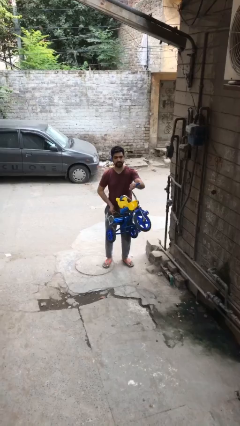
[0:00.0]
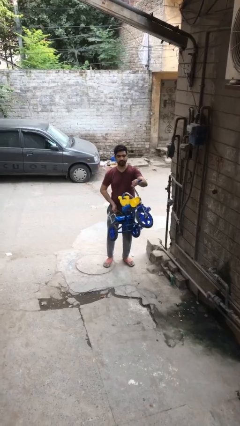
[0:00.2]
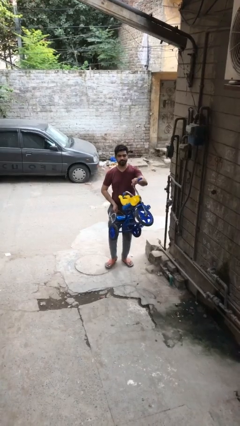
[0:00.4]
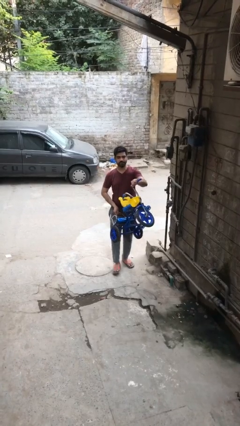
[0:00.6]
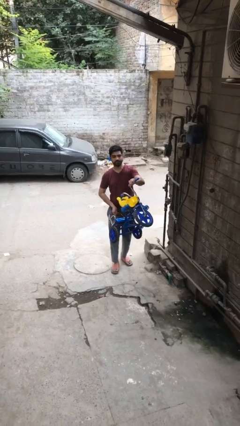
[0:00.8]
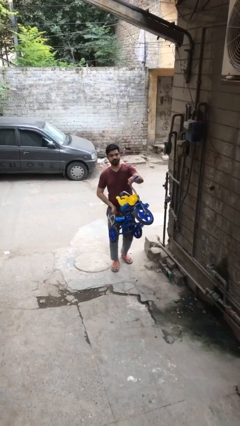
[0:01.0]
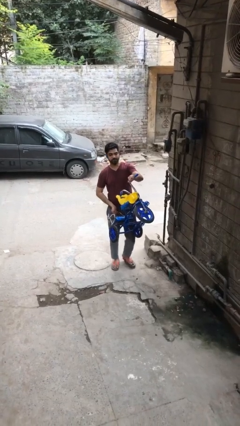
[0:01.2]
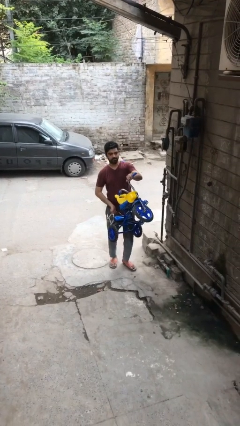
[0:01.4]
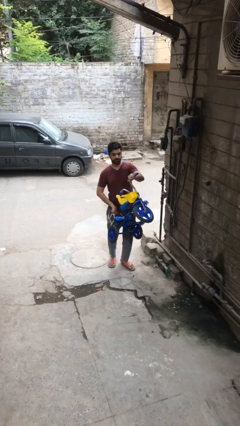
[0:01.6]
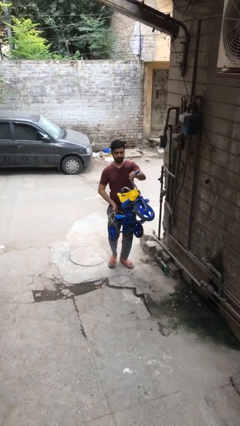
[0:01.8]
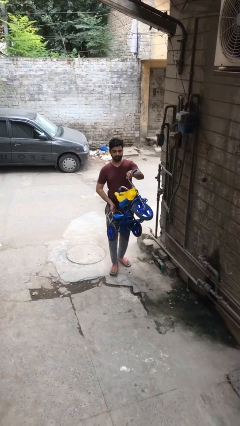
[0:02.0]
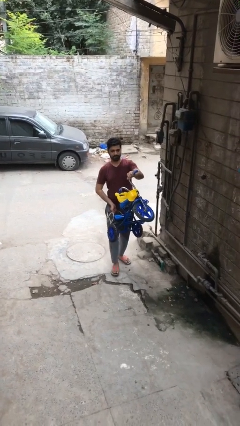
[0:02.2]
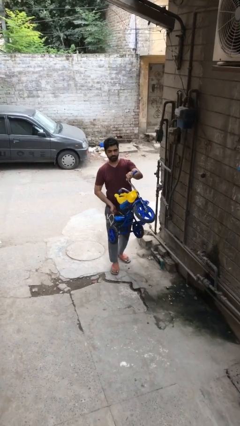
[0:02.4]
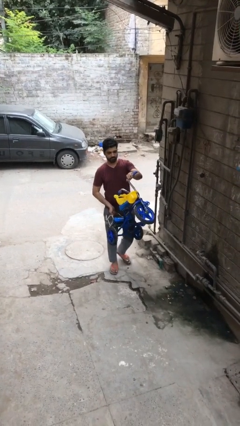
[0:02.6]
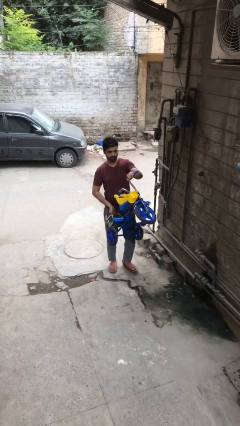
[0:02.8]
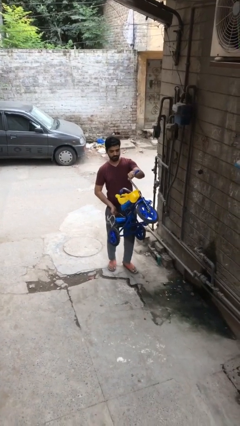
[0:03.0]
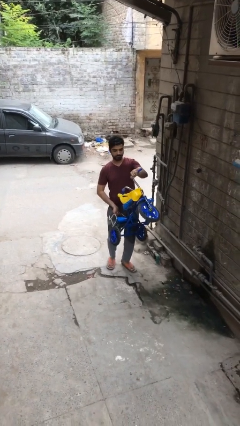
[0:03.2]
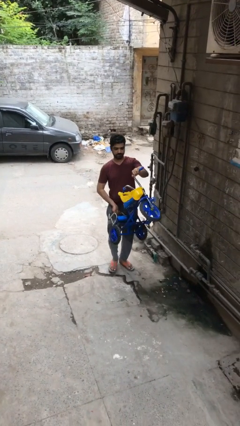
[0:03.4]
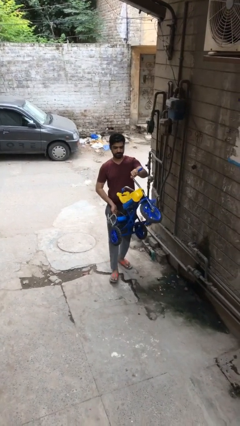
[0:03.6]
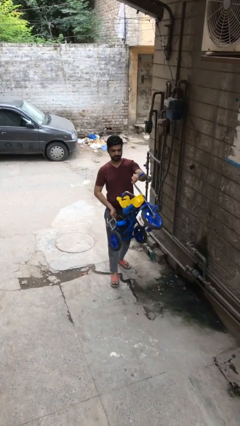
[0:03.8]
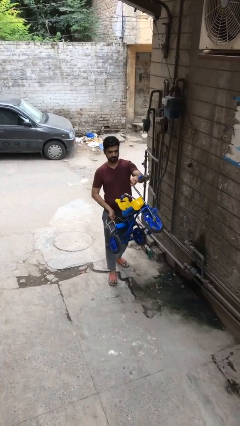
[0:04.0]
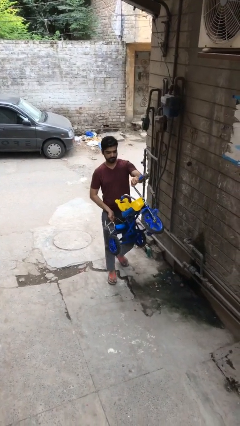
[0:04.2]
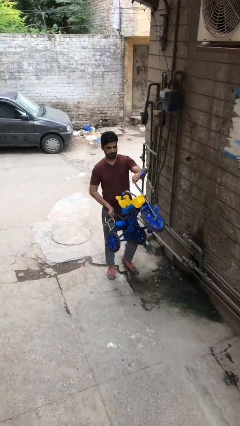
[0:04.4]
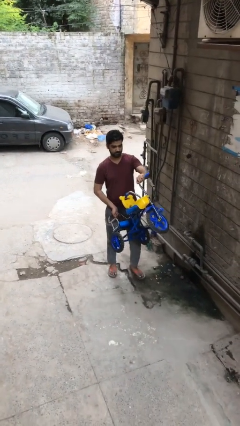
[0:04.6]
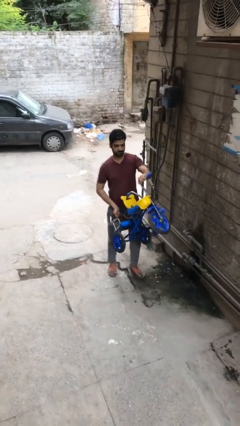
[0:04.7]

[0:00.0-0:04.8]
person carries heavy object

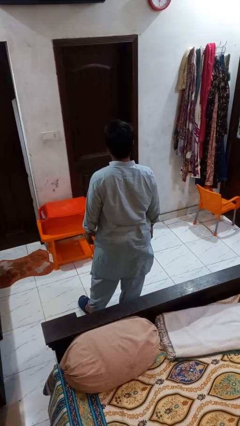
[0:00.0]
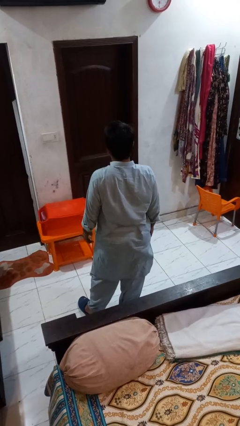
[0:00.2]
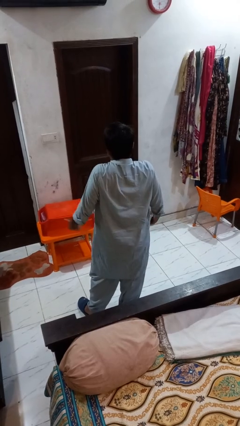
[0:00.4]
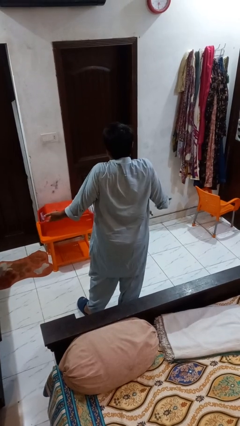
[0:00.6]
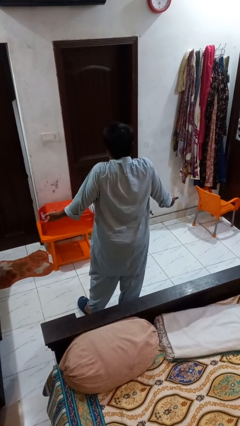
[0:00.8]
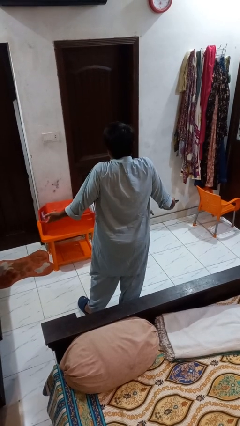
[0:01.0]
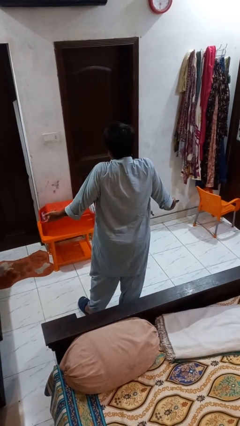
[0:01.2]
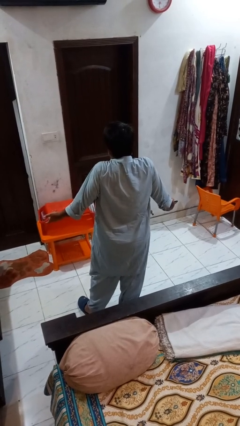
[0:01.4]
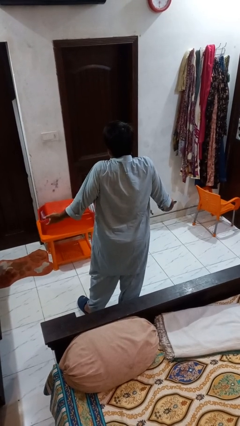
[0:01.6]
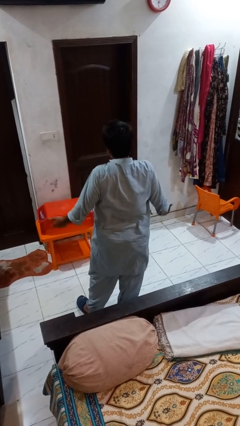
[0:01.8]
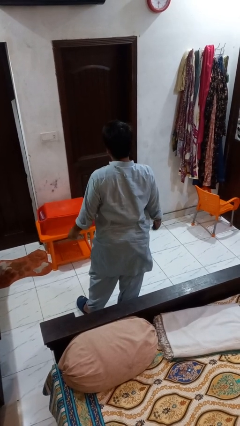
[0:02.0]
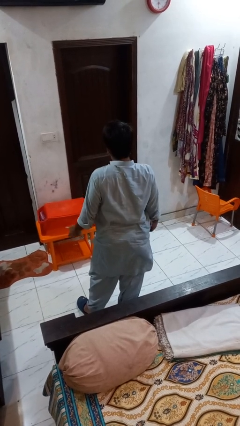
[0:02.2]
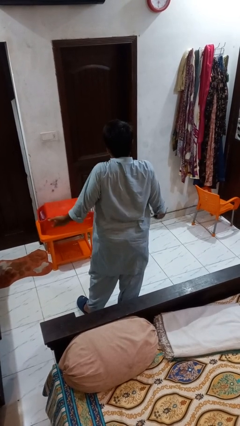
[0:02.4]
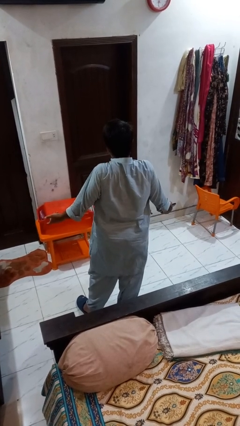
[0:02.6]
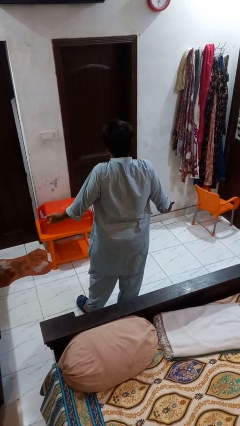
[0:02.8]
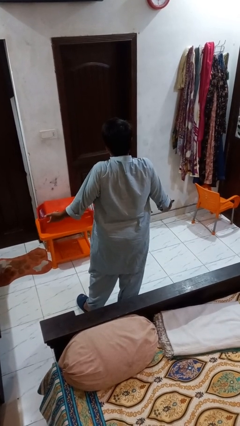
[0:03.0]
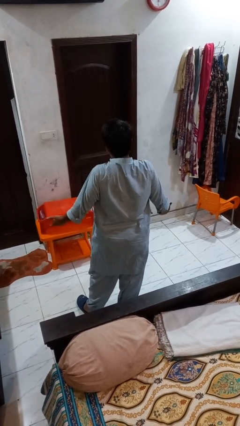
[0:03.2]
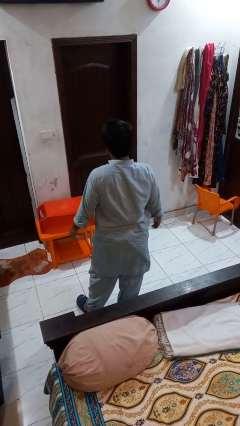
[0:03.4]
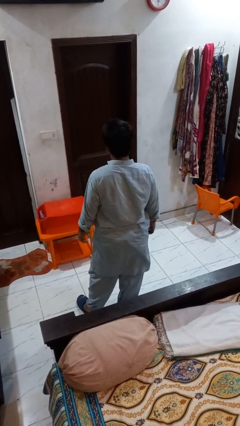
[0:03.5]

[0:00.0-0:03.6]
person shrugs

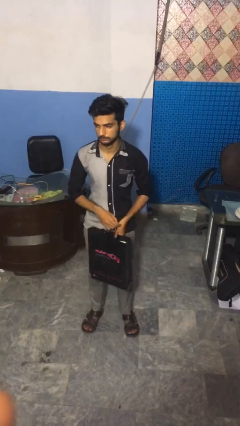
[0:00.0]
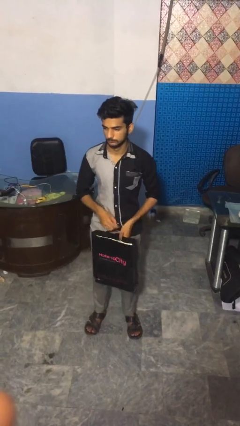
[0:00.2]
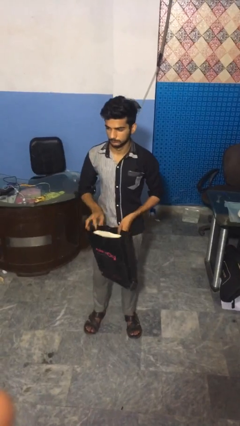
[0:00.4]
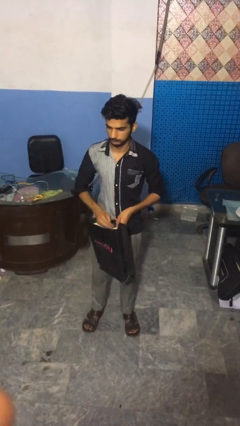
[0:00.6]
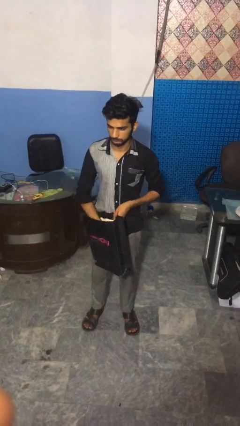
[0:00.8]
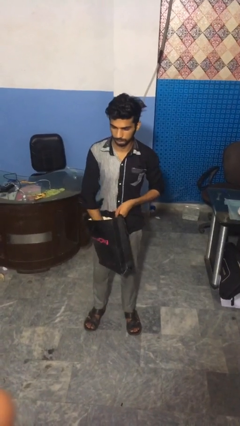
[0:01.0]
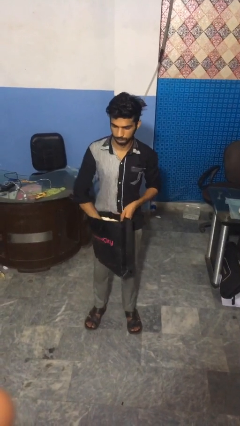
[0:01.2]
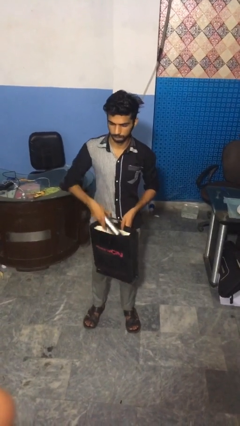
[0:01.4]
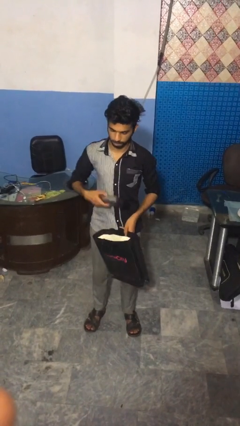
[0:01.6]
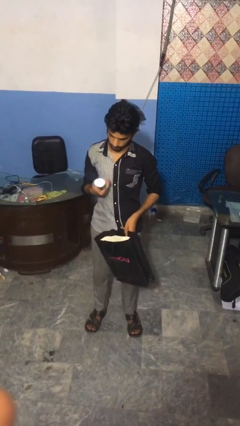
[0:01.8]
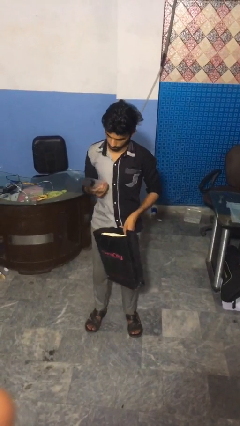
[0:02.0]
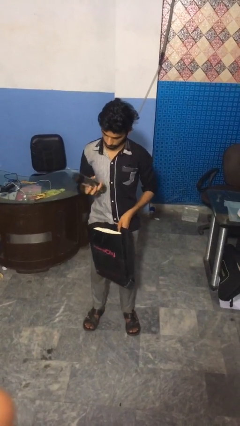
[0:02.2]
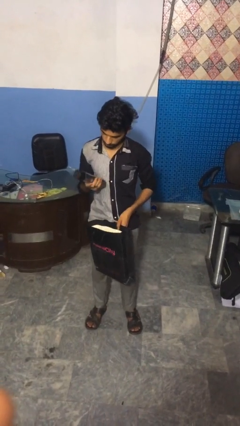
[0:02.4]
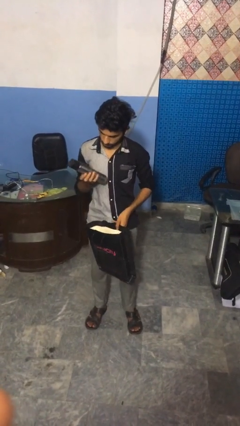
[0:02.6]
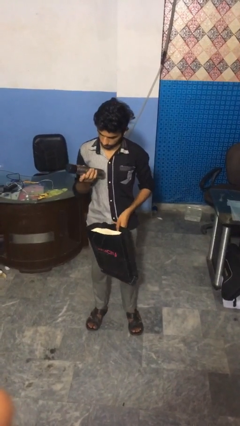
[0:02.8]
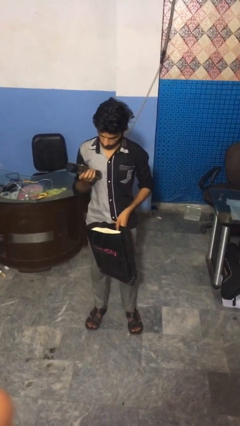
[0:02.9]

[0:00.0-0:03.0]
person takes object from bag

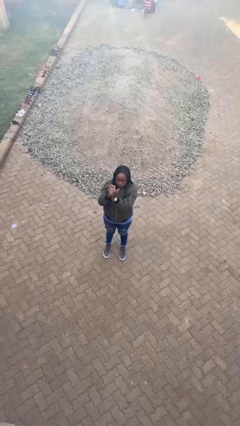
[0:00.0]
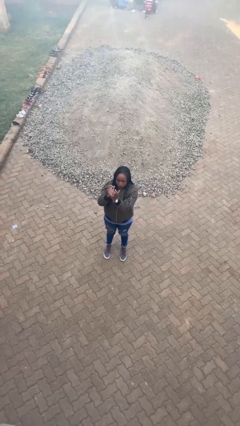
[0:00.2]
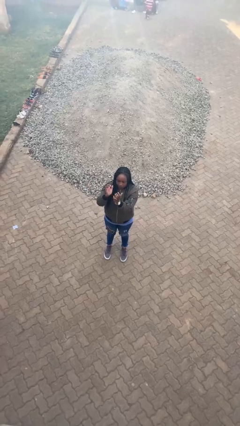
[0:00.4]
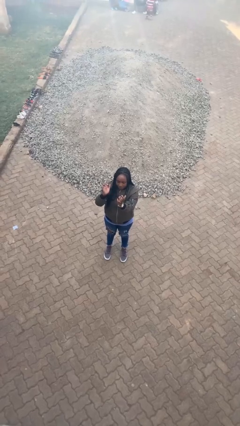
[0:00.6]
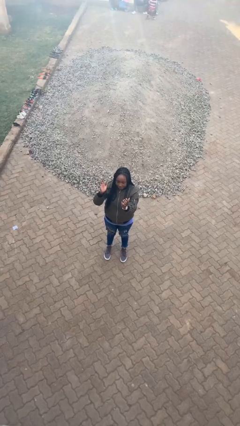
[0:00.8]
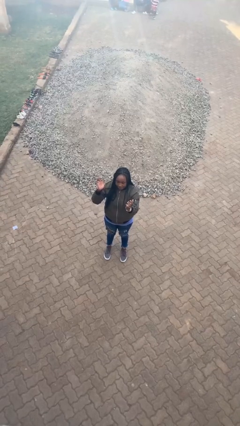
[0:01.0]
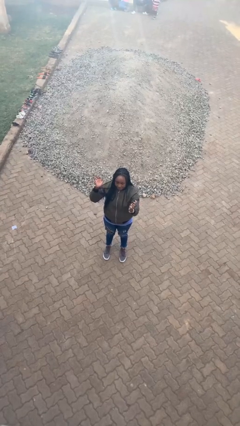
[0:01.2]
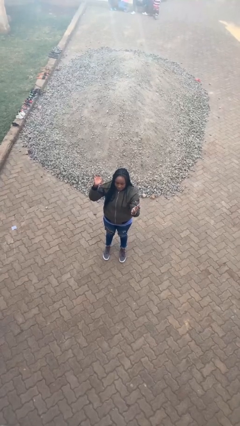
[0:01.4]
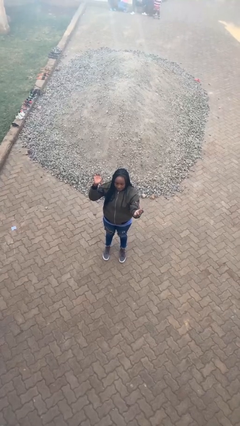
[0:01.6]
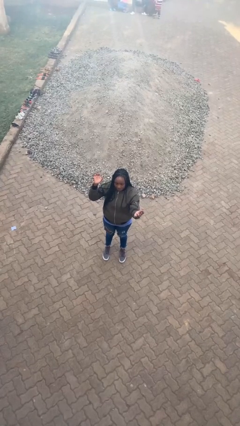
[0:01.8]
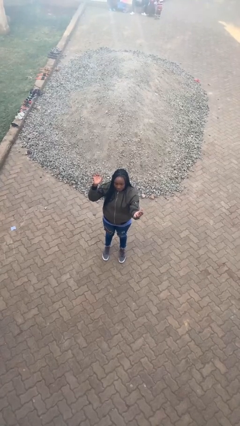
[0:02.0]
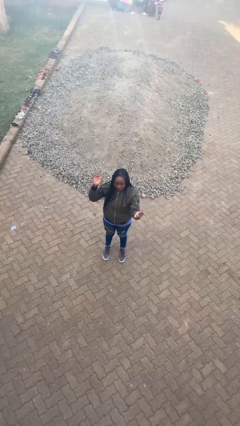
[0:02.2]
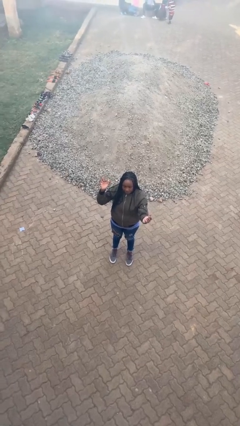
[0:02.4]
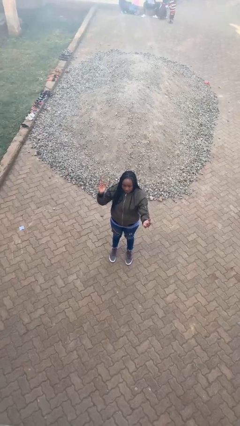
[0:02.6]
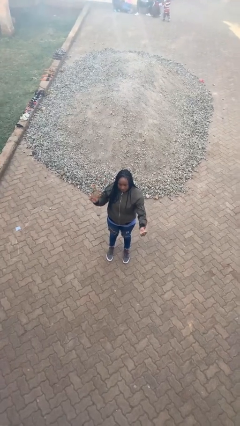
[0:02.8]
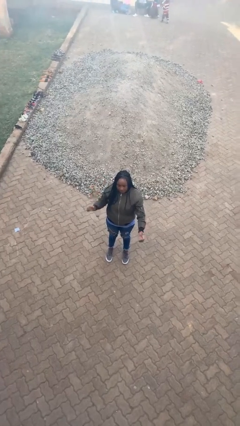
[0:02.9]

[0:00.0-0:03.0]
person gestures zoom out

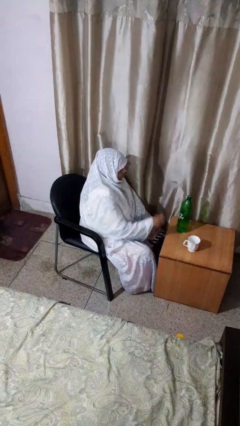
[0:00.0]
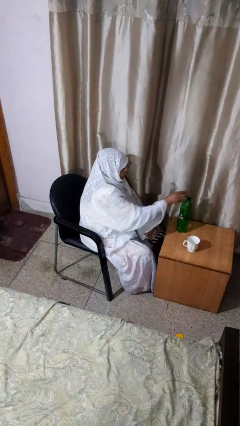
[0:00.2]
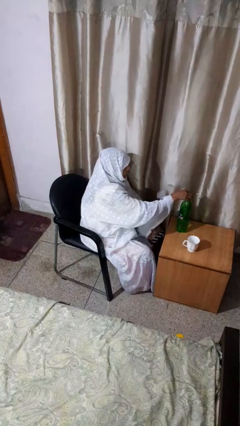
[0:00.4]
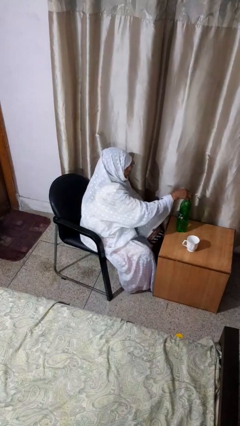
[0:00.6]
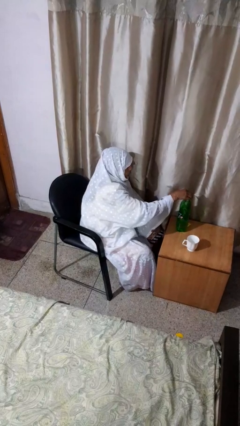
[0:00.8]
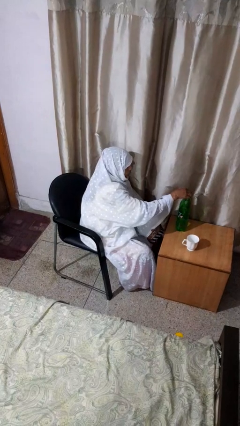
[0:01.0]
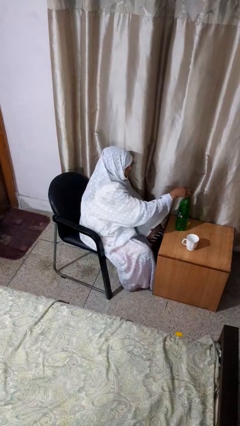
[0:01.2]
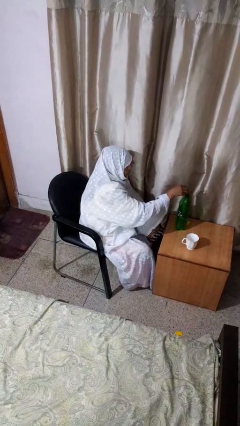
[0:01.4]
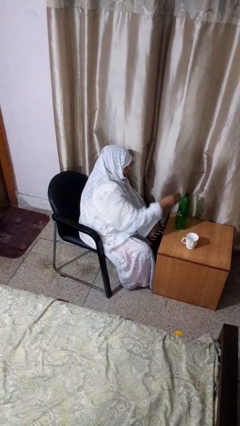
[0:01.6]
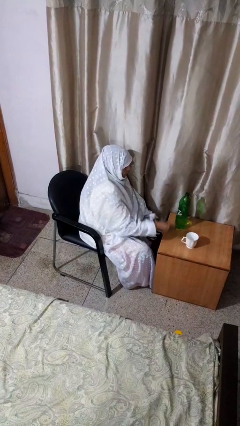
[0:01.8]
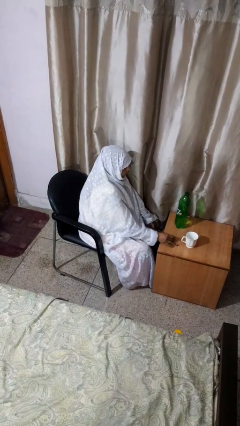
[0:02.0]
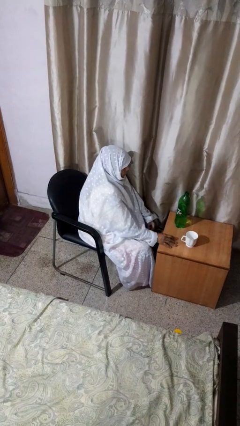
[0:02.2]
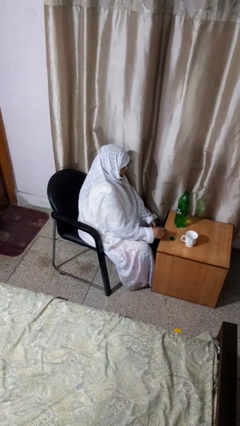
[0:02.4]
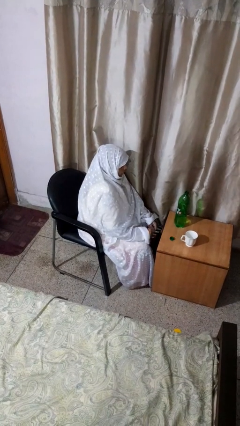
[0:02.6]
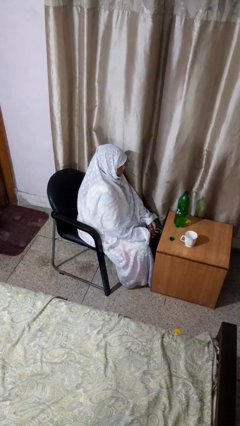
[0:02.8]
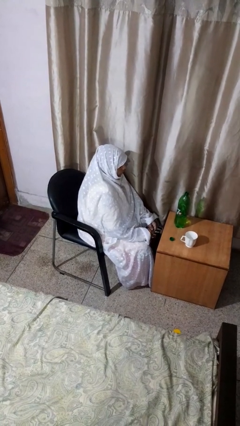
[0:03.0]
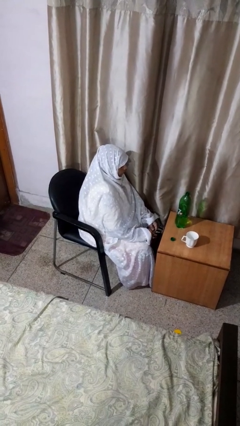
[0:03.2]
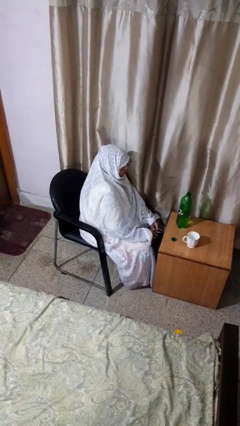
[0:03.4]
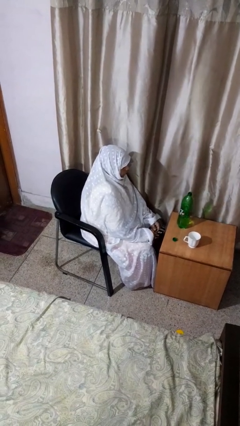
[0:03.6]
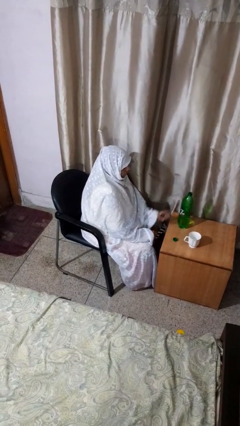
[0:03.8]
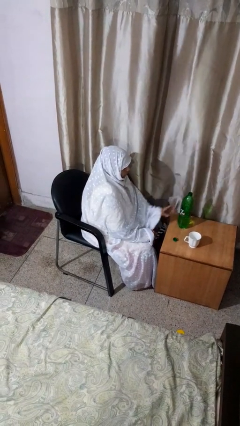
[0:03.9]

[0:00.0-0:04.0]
person unscrews lid from bottle
